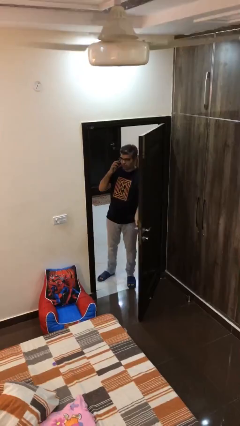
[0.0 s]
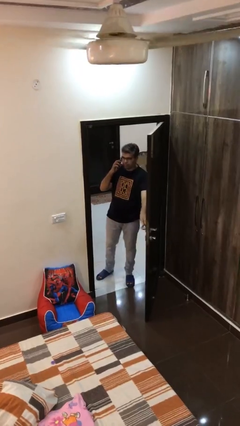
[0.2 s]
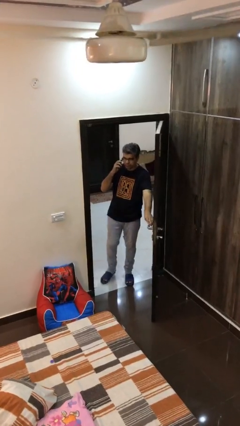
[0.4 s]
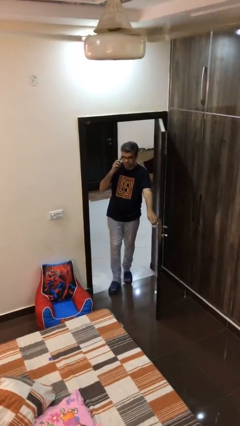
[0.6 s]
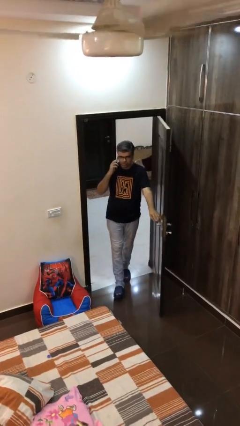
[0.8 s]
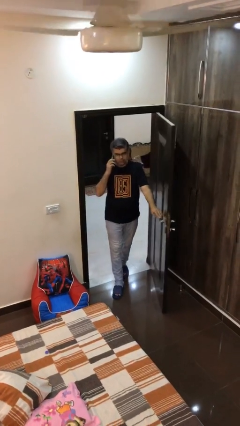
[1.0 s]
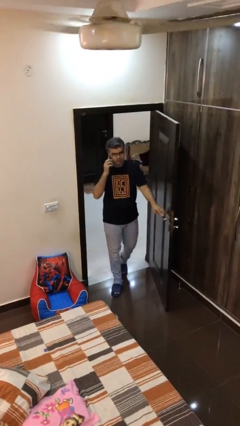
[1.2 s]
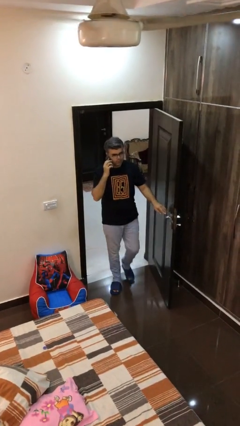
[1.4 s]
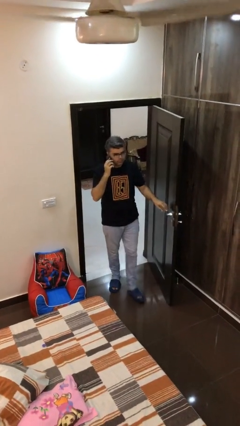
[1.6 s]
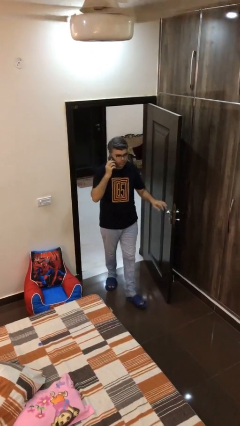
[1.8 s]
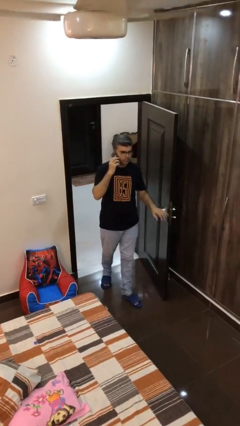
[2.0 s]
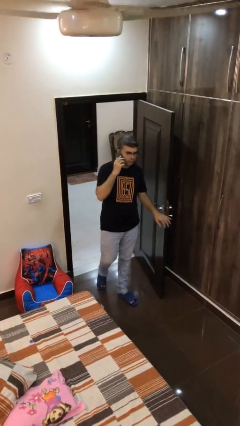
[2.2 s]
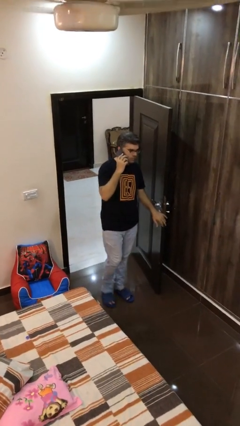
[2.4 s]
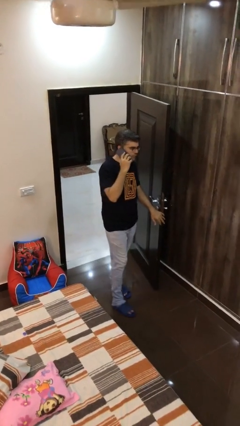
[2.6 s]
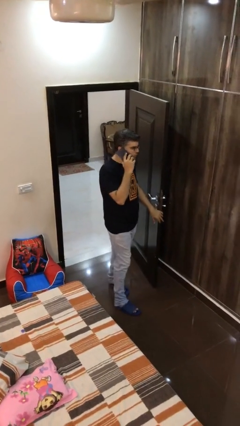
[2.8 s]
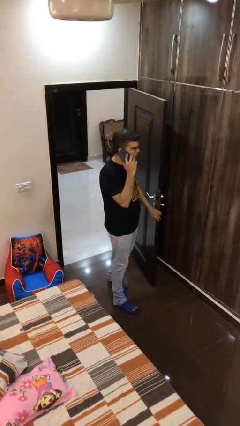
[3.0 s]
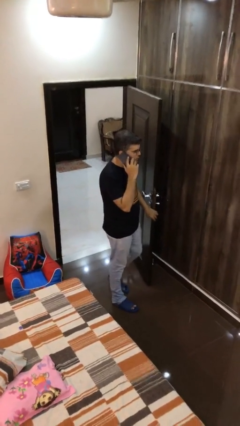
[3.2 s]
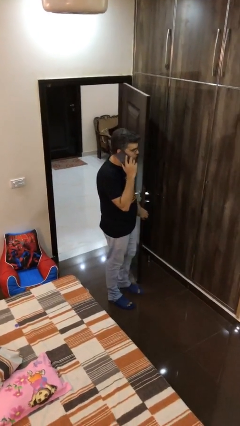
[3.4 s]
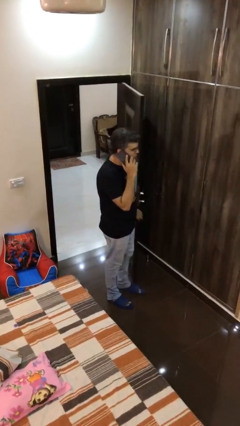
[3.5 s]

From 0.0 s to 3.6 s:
person enters scene through structure

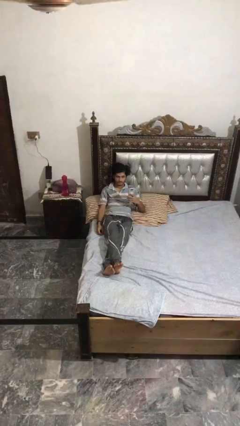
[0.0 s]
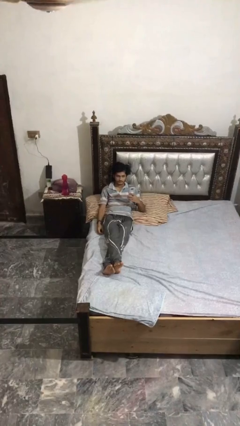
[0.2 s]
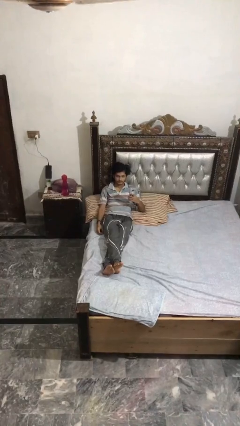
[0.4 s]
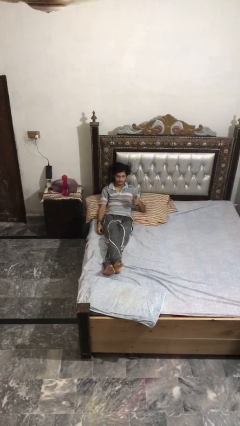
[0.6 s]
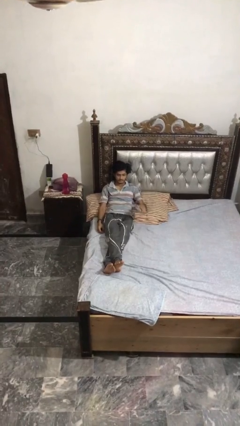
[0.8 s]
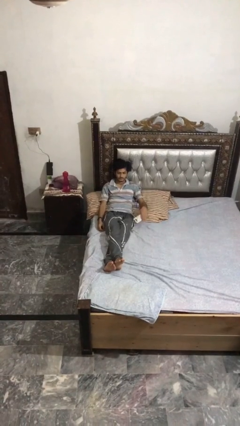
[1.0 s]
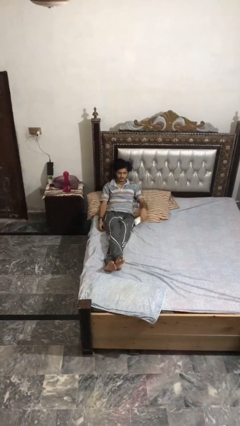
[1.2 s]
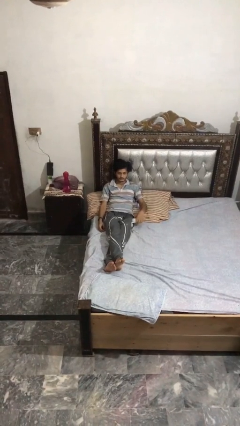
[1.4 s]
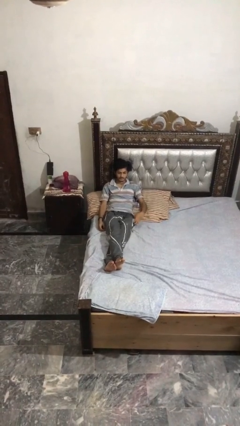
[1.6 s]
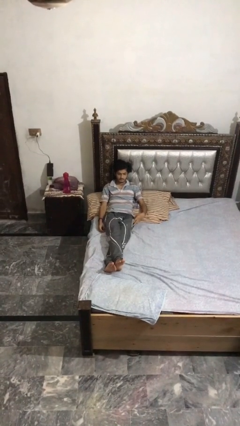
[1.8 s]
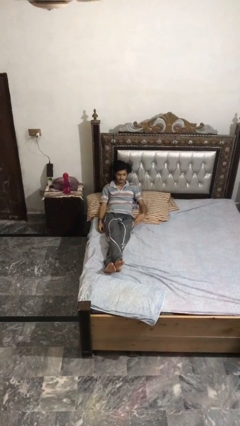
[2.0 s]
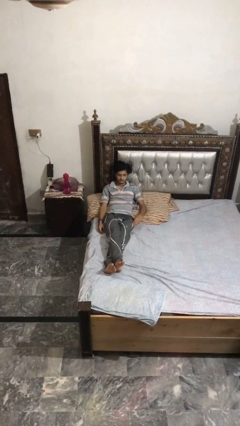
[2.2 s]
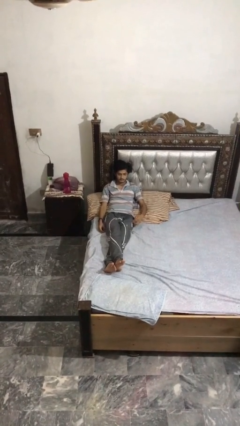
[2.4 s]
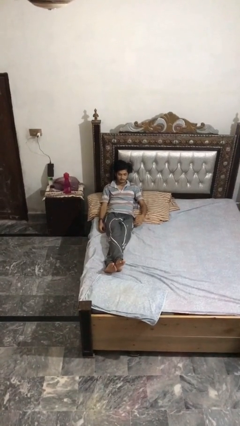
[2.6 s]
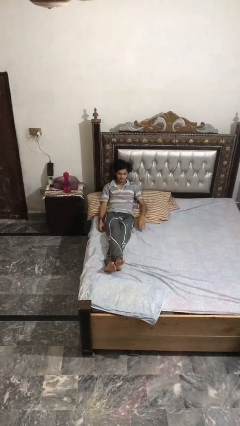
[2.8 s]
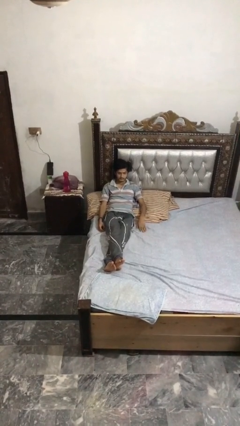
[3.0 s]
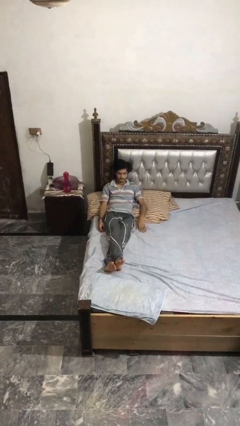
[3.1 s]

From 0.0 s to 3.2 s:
person puts phone into pocket

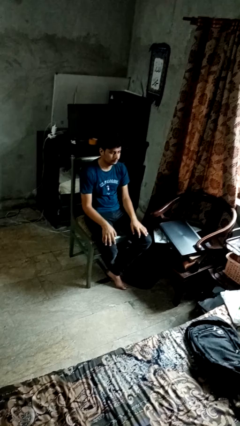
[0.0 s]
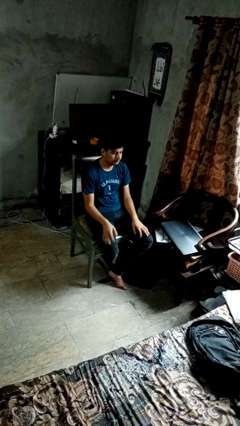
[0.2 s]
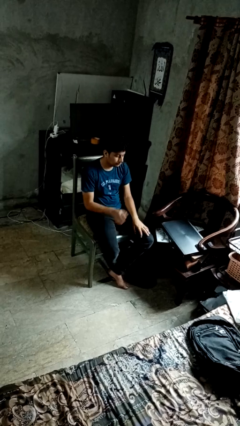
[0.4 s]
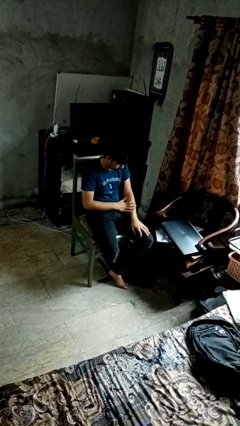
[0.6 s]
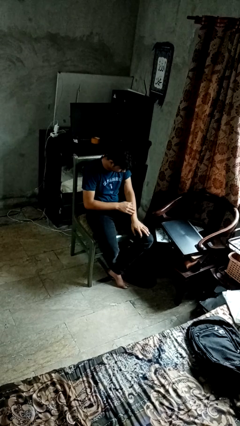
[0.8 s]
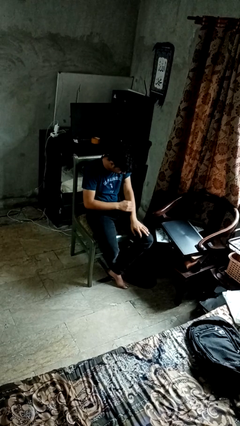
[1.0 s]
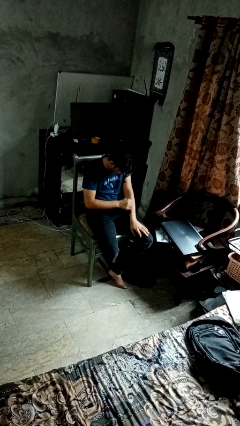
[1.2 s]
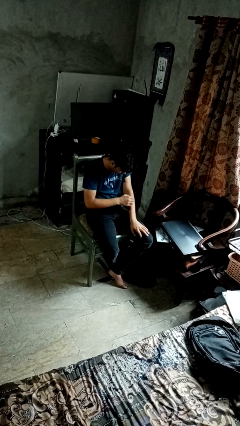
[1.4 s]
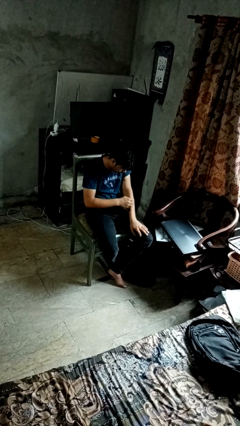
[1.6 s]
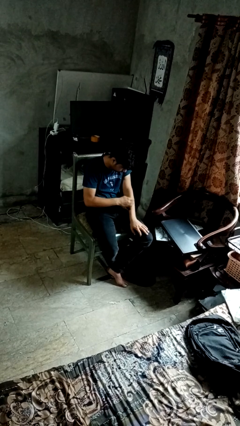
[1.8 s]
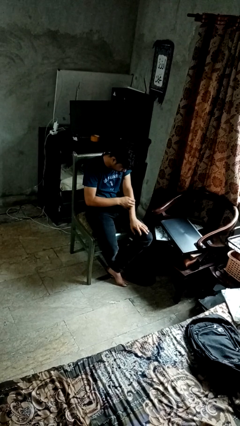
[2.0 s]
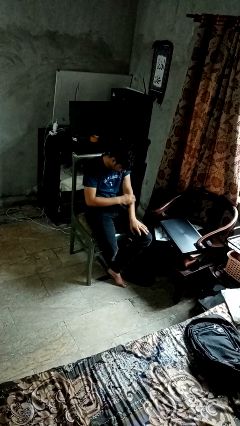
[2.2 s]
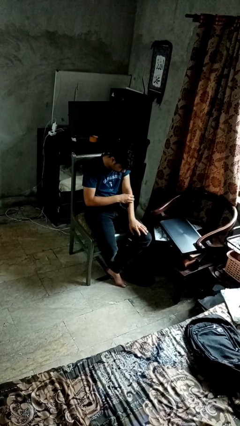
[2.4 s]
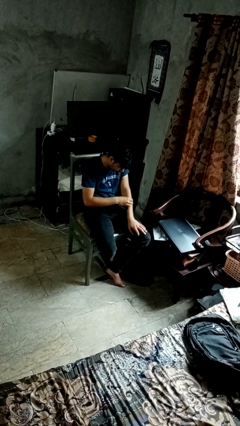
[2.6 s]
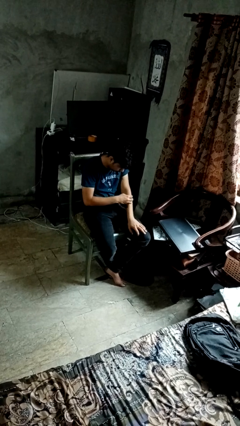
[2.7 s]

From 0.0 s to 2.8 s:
person swats bug

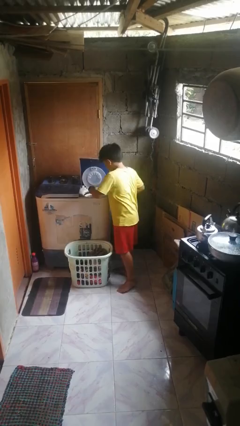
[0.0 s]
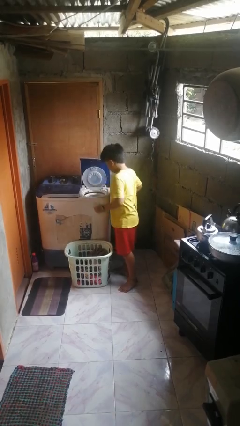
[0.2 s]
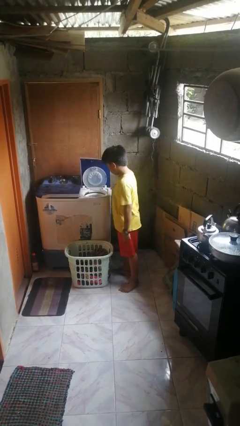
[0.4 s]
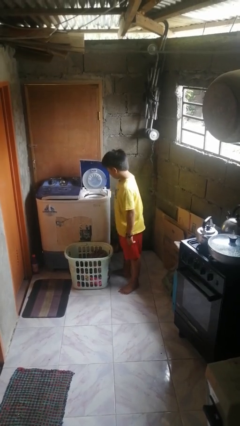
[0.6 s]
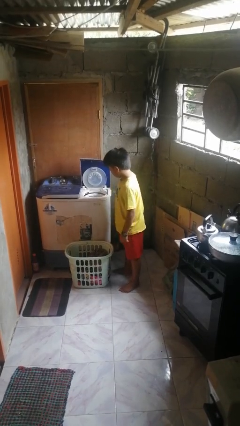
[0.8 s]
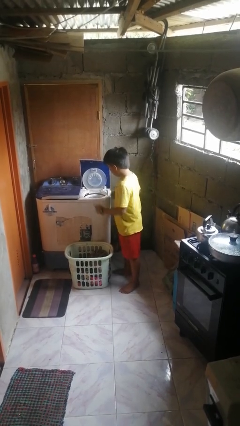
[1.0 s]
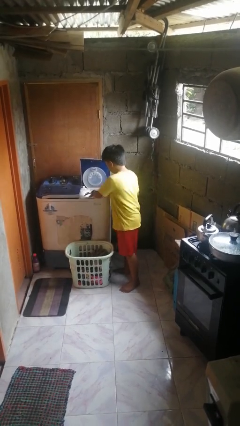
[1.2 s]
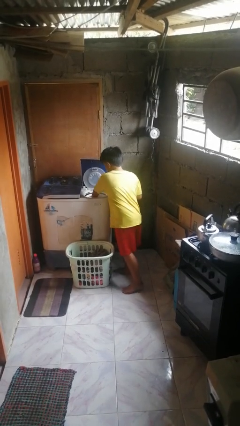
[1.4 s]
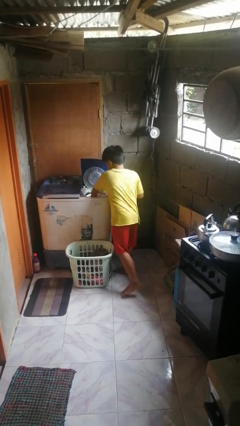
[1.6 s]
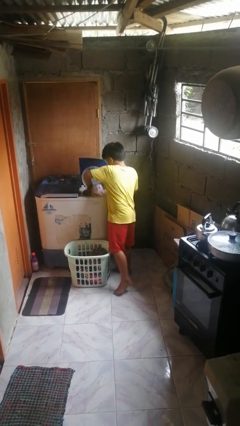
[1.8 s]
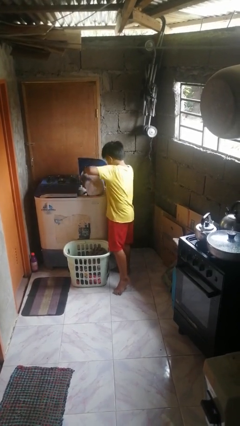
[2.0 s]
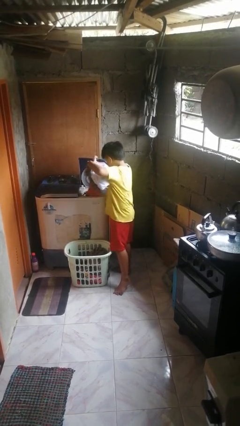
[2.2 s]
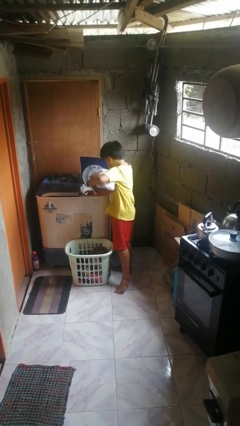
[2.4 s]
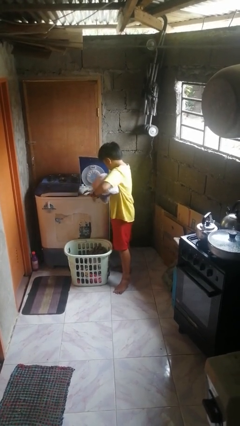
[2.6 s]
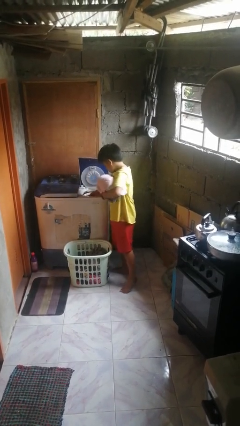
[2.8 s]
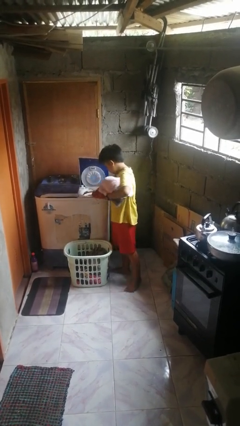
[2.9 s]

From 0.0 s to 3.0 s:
person unloads dryer

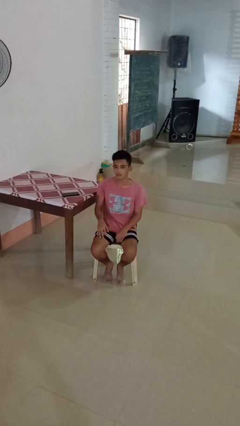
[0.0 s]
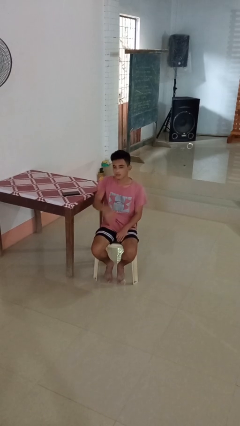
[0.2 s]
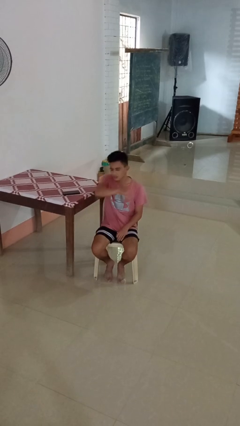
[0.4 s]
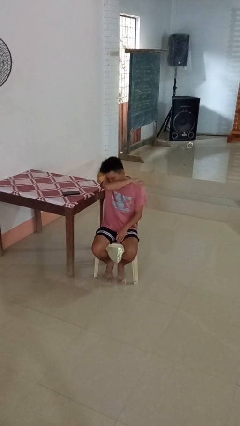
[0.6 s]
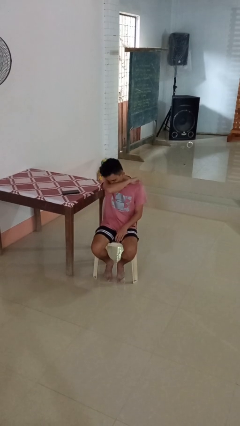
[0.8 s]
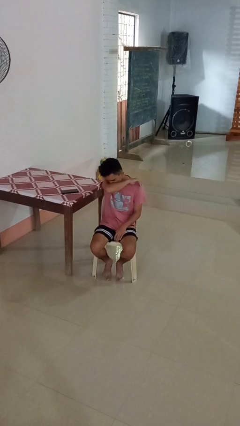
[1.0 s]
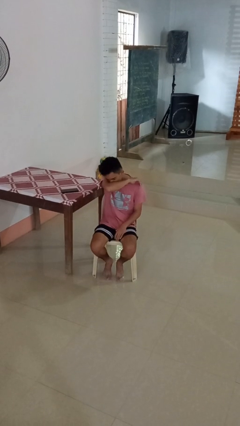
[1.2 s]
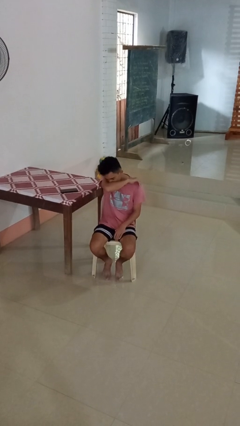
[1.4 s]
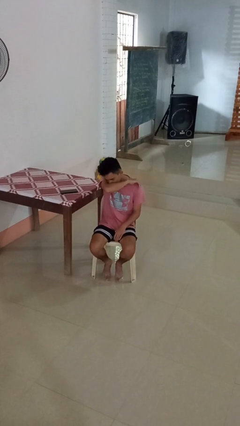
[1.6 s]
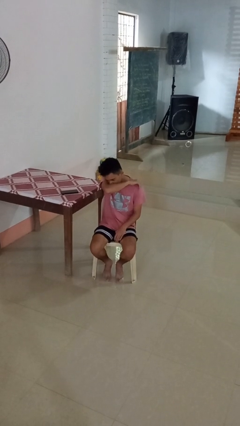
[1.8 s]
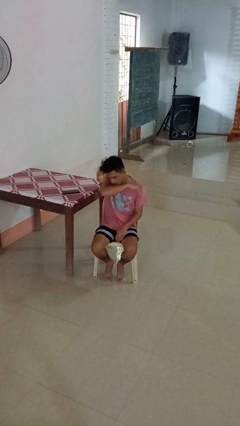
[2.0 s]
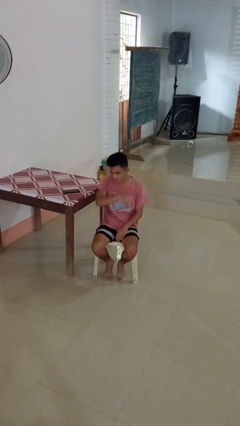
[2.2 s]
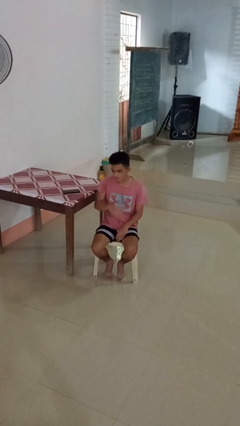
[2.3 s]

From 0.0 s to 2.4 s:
person sneezes into arm

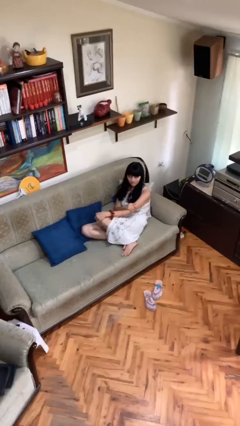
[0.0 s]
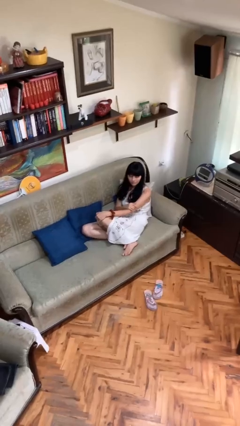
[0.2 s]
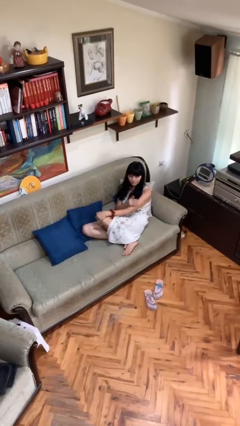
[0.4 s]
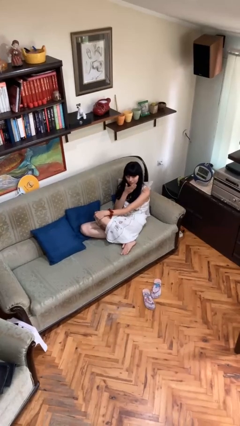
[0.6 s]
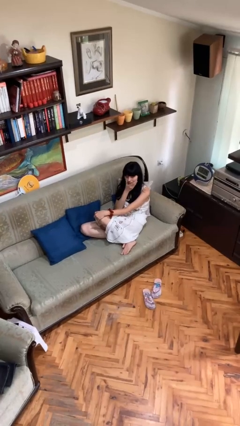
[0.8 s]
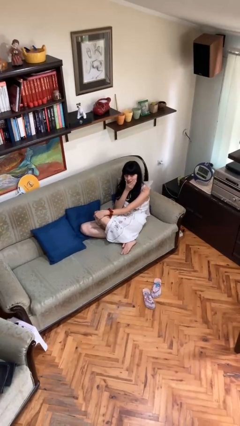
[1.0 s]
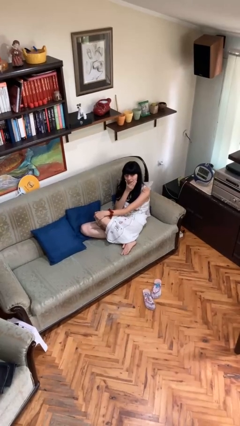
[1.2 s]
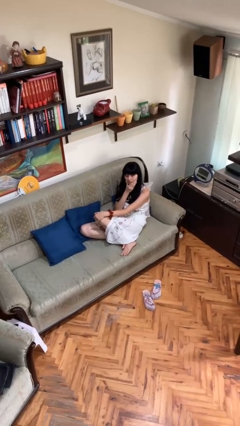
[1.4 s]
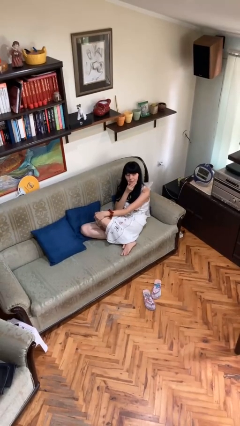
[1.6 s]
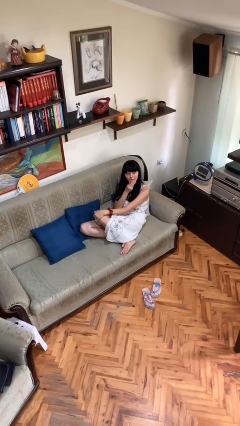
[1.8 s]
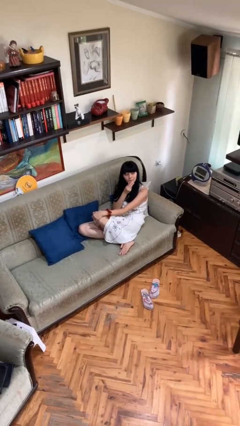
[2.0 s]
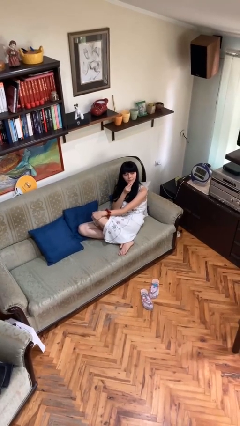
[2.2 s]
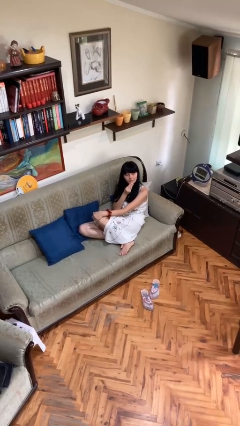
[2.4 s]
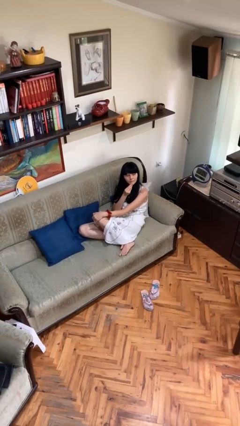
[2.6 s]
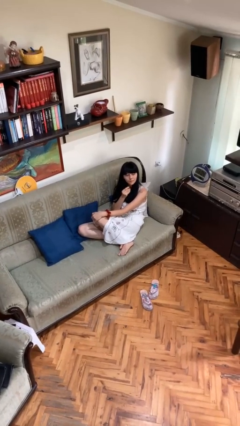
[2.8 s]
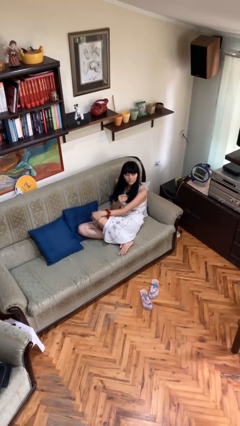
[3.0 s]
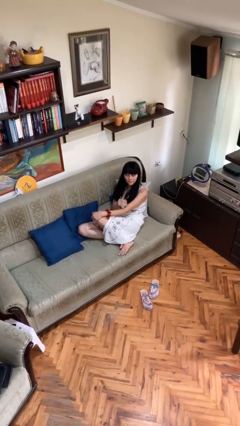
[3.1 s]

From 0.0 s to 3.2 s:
person strokes chin
